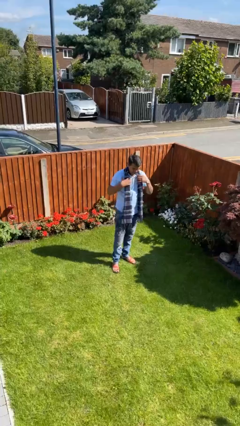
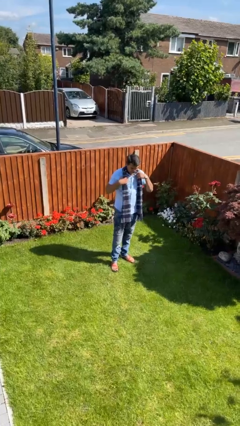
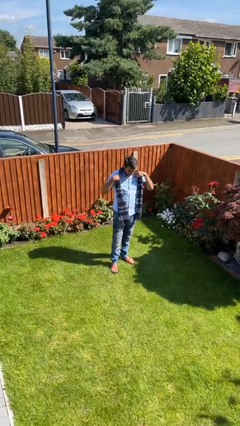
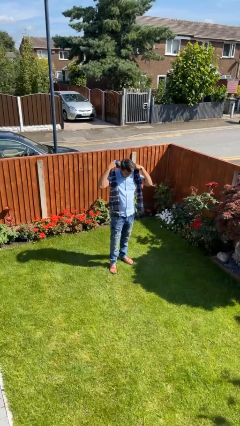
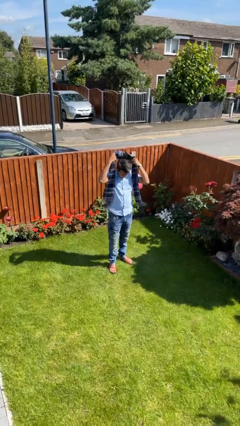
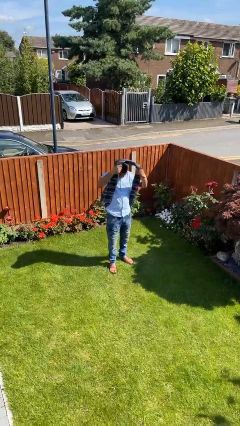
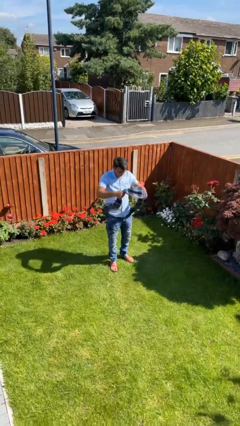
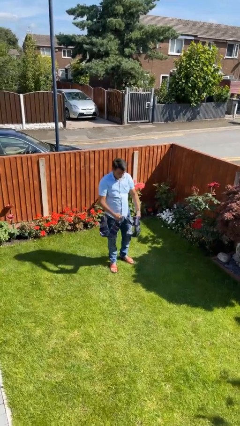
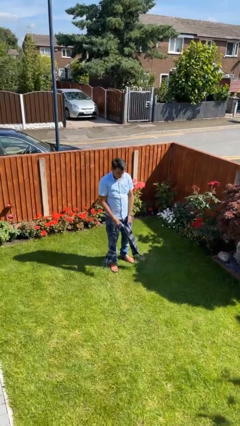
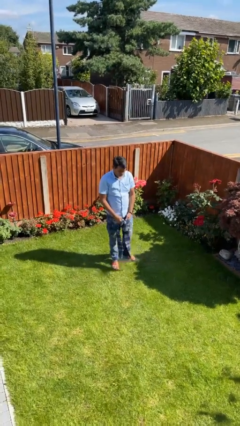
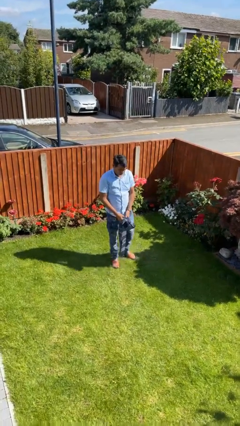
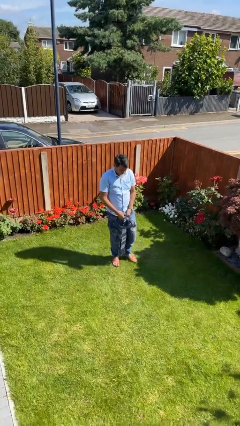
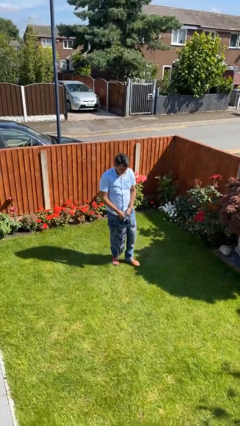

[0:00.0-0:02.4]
person takes off scarf

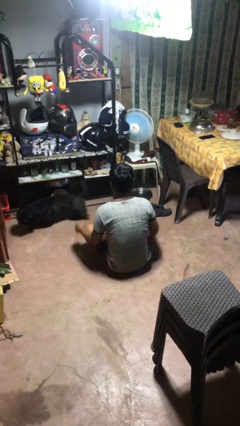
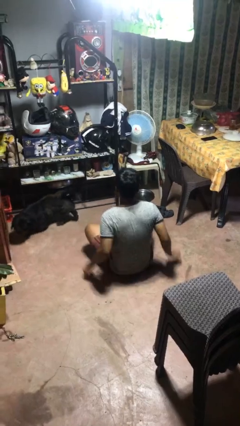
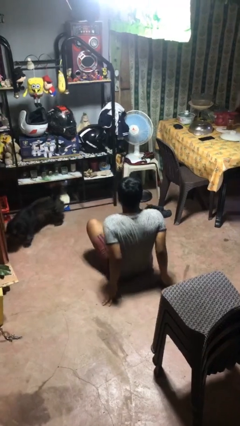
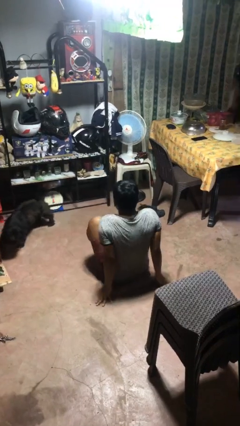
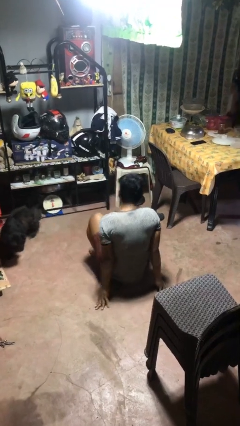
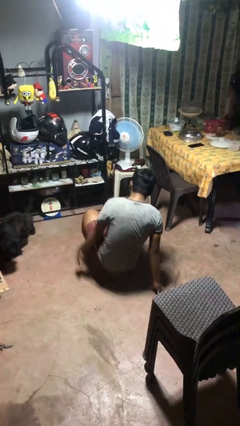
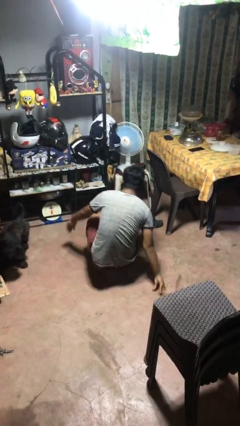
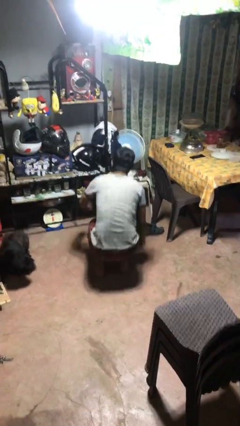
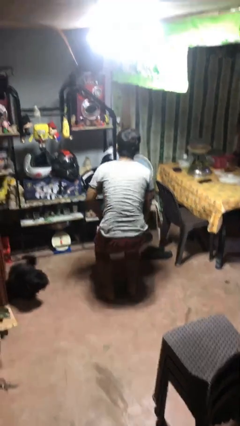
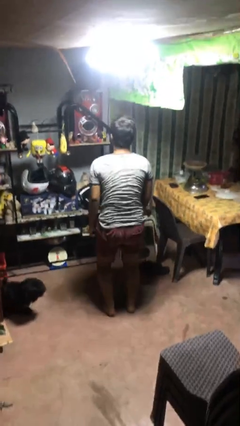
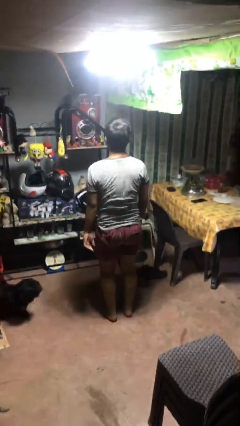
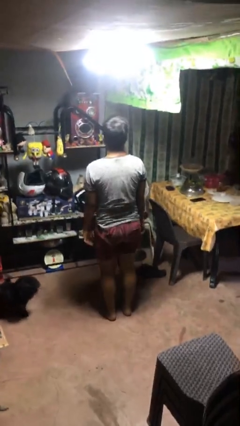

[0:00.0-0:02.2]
person stands up from floor

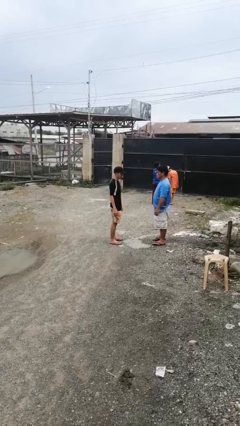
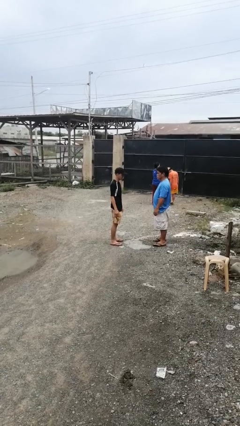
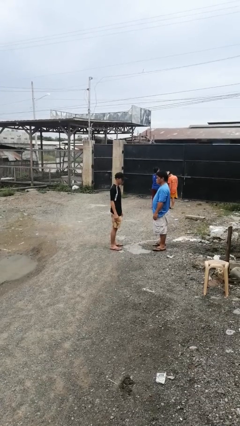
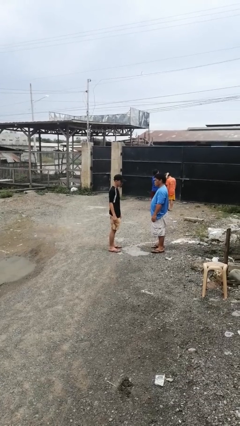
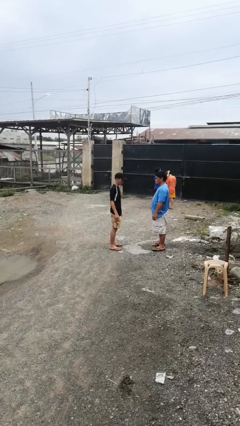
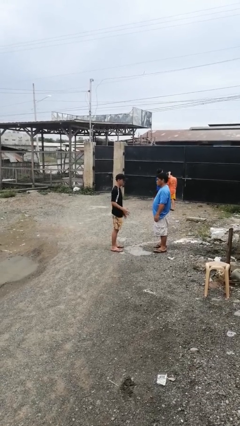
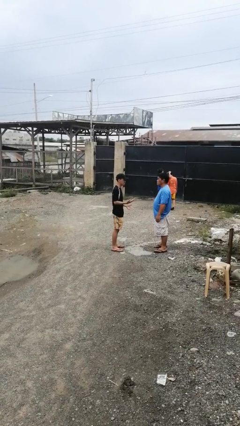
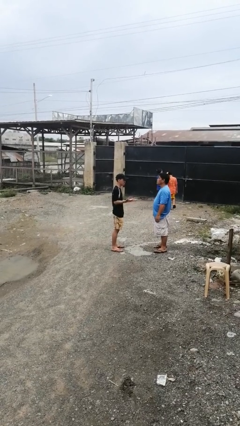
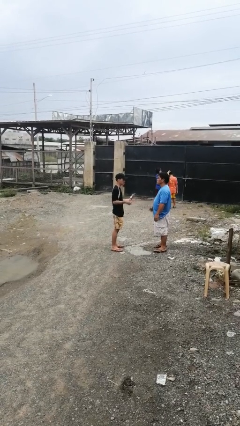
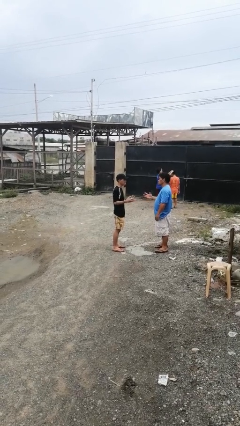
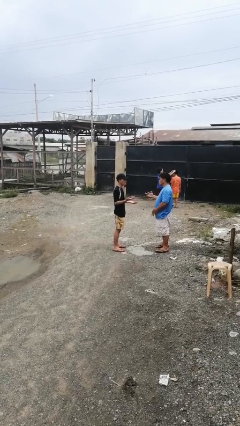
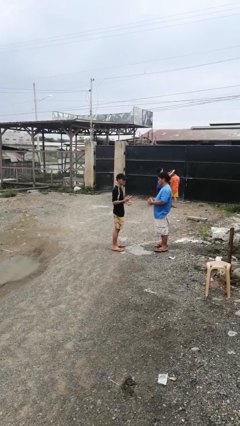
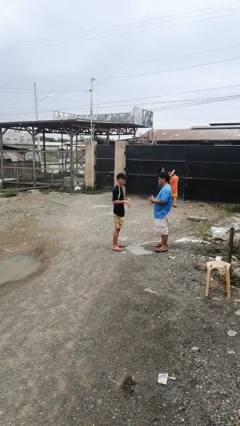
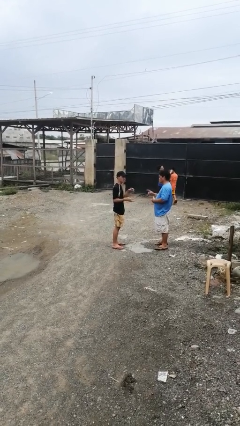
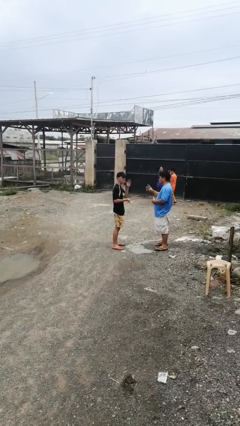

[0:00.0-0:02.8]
person talks to person

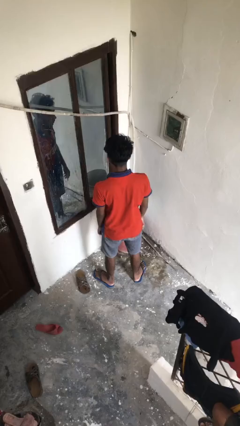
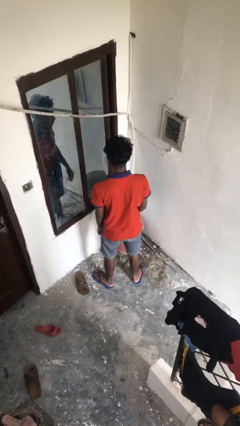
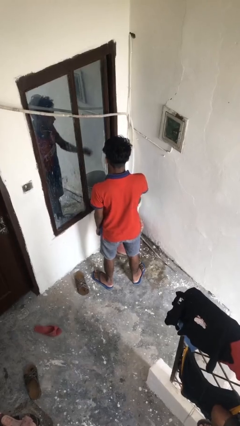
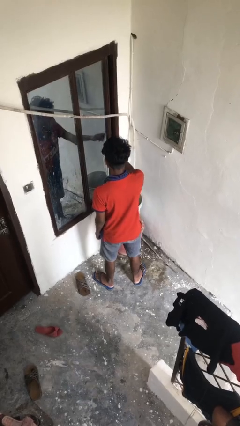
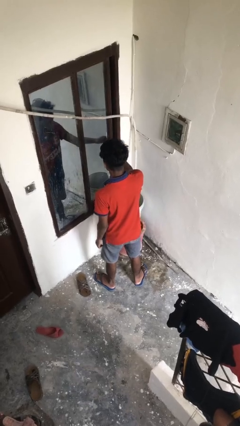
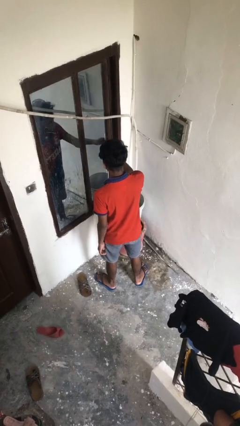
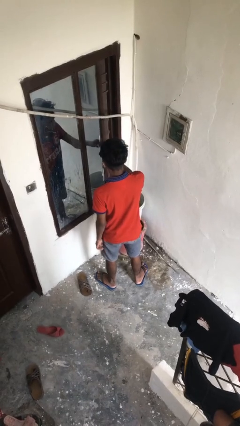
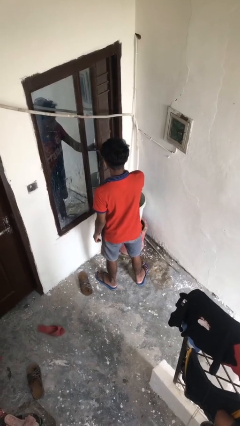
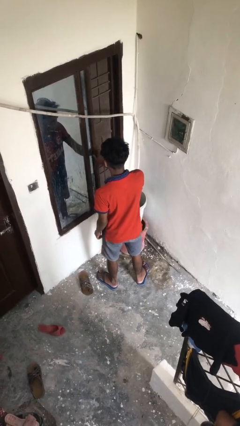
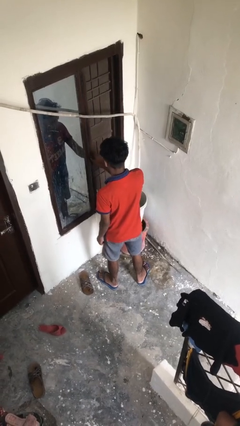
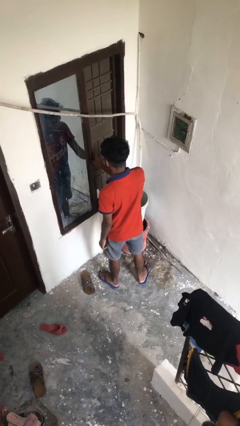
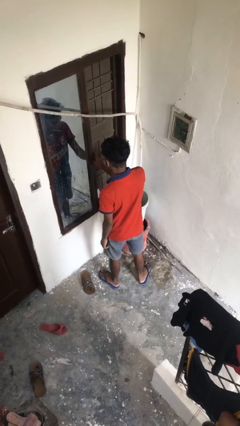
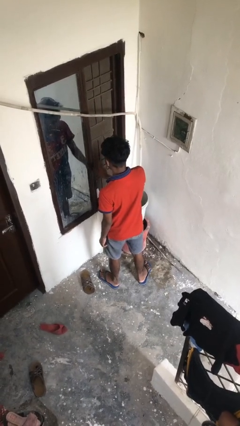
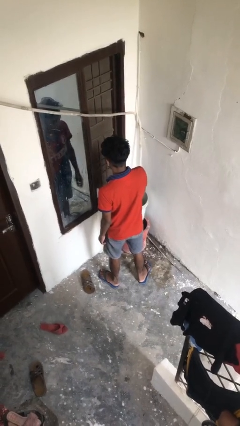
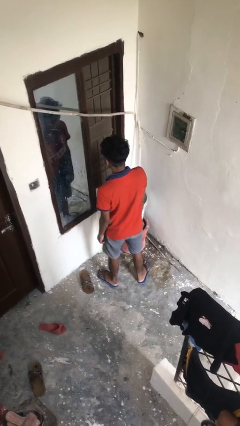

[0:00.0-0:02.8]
person opens home window

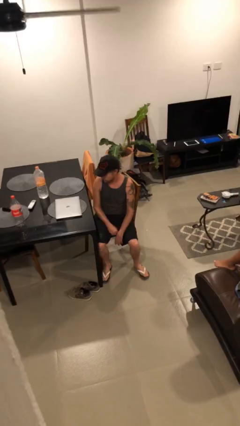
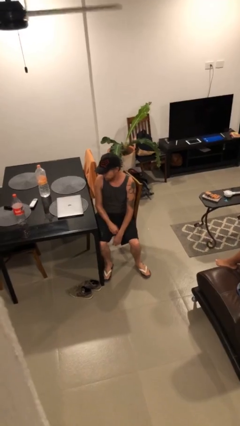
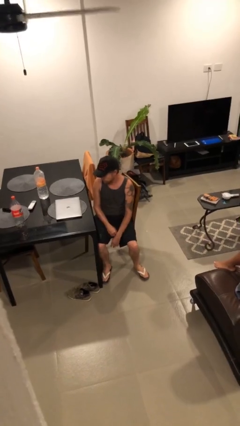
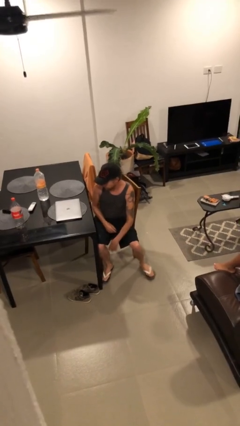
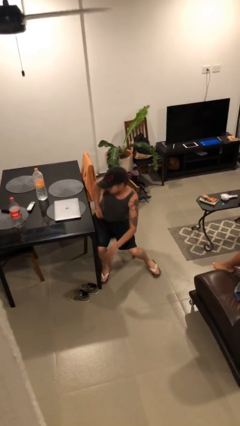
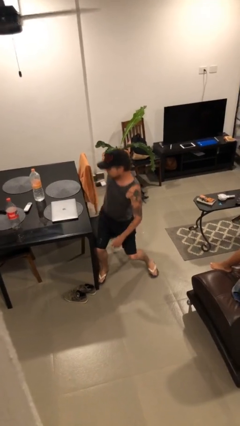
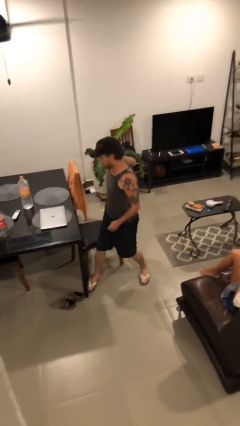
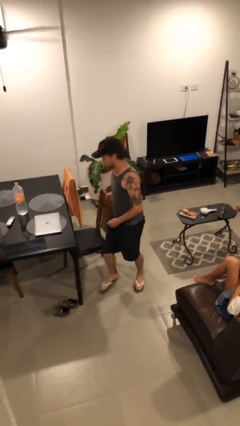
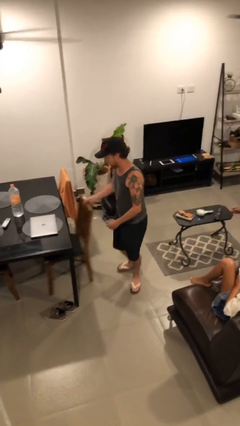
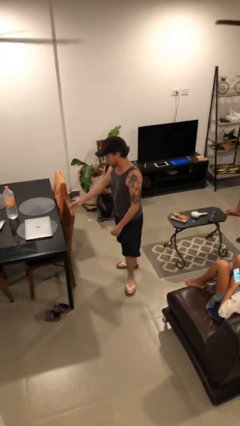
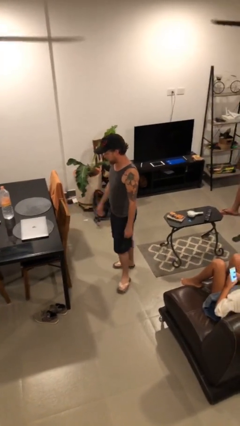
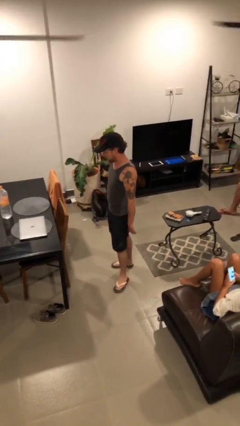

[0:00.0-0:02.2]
person stands up

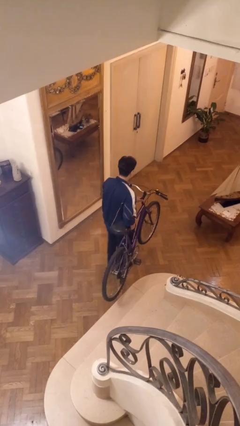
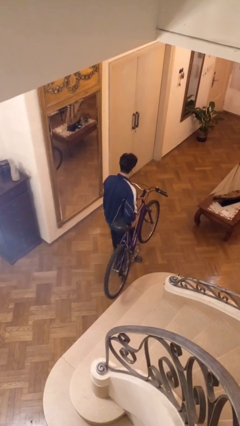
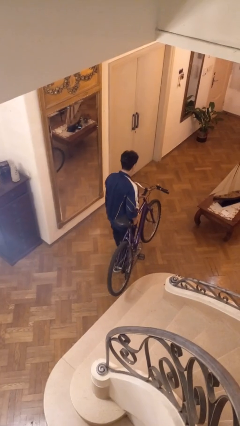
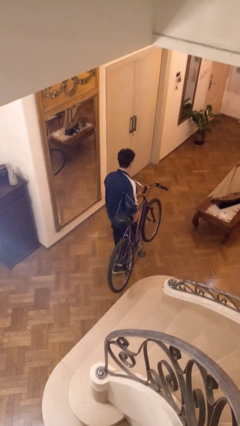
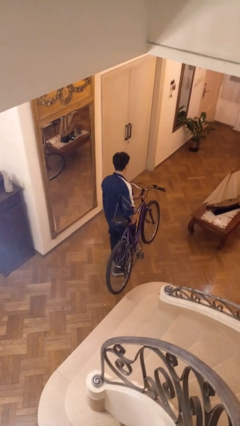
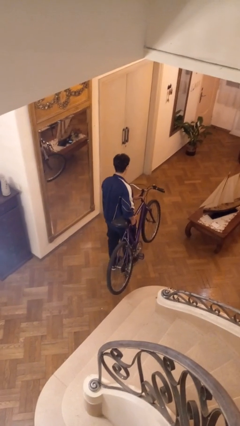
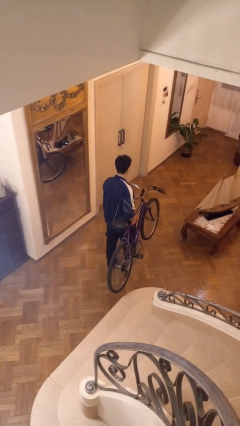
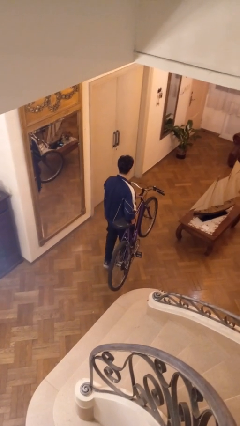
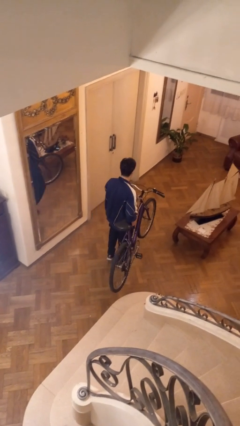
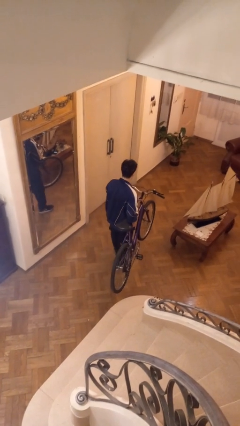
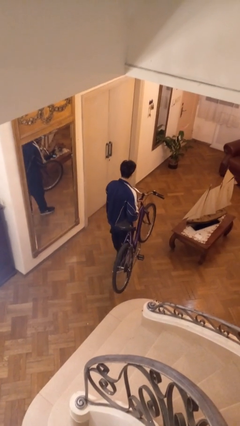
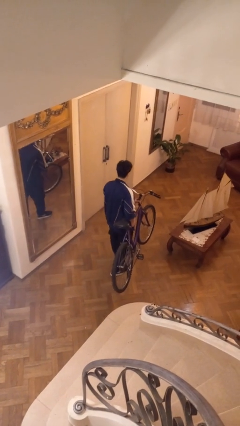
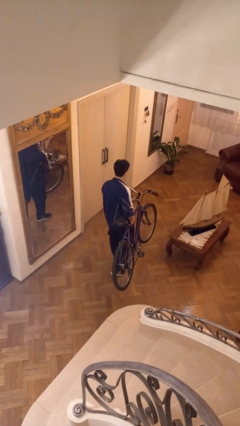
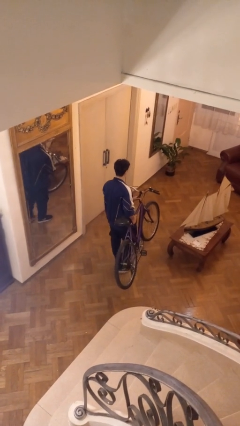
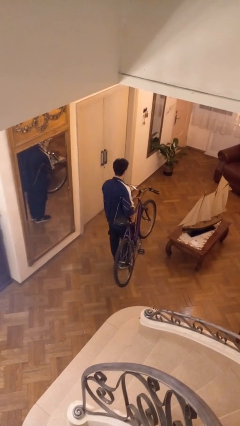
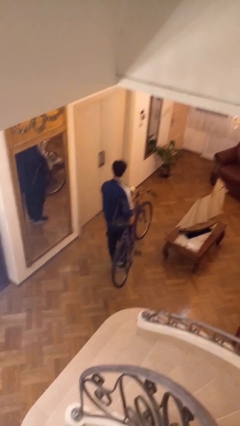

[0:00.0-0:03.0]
person carries bicycle

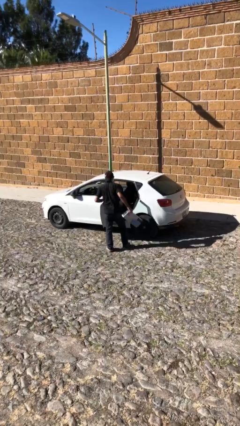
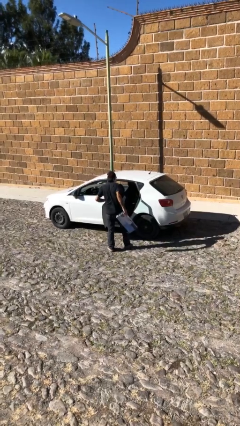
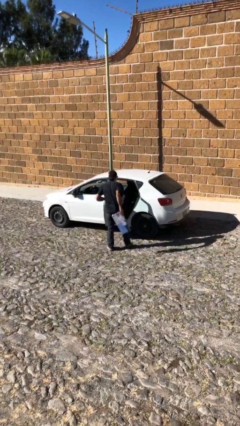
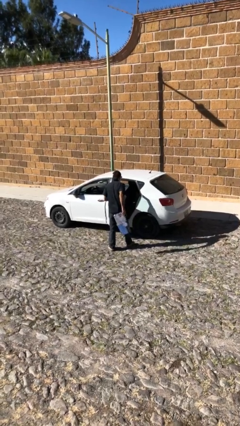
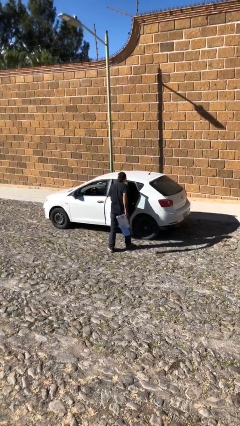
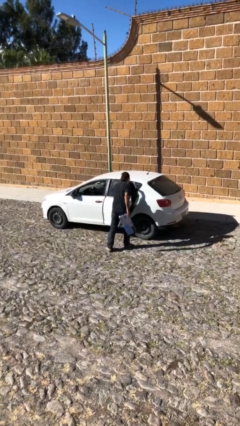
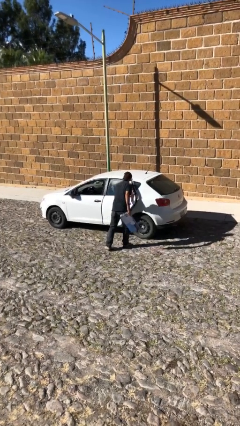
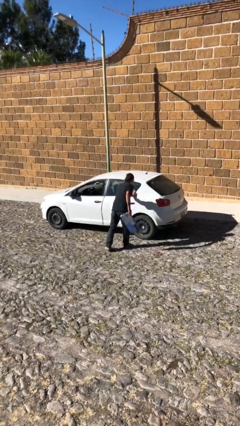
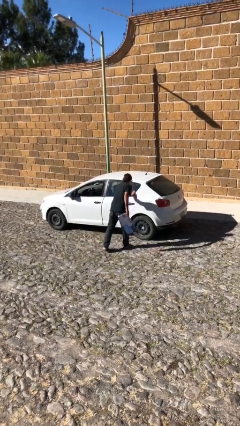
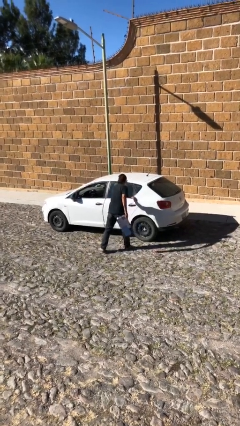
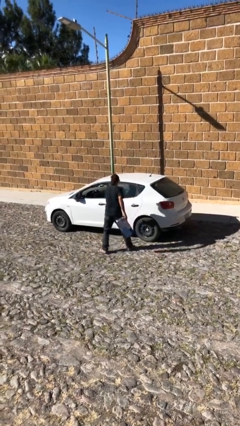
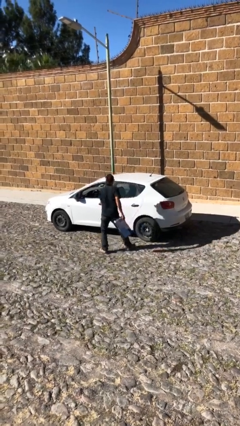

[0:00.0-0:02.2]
person closes car door
